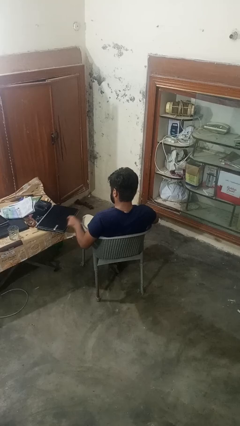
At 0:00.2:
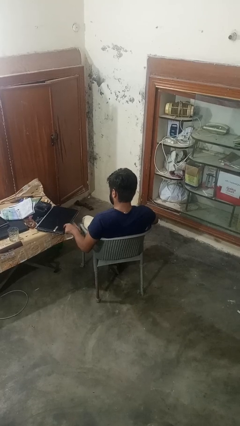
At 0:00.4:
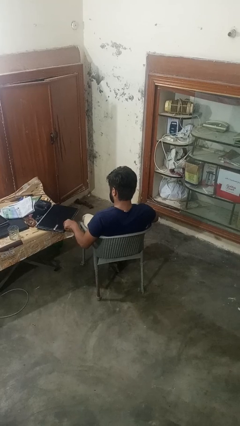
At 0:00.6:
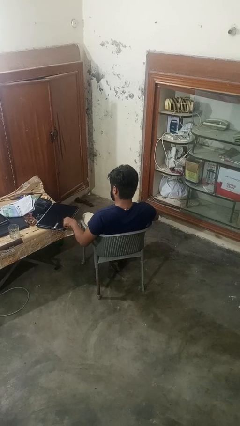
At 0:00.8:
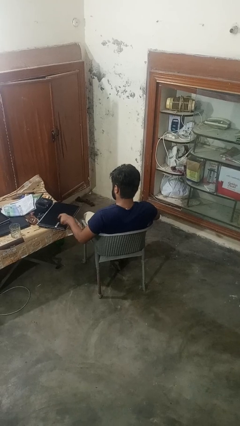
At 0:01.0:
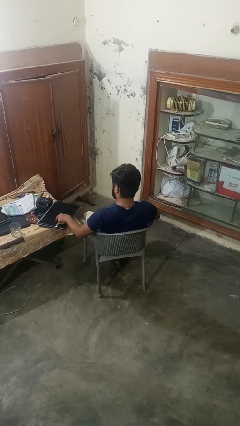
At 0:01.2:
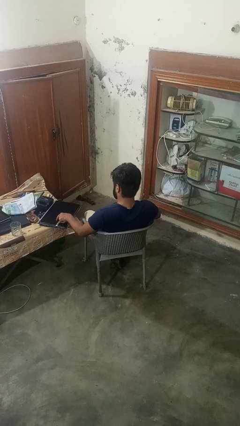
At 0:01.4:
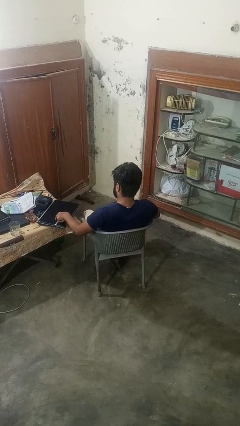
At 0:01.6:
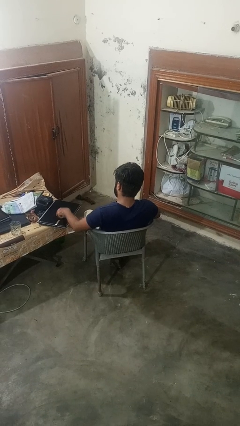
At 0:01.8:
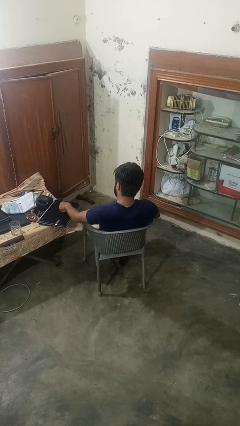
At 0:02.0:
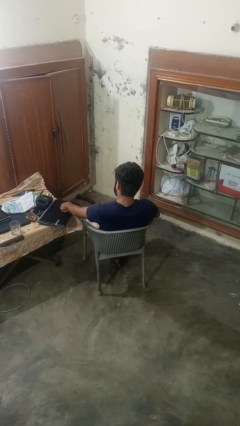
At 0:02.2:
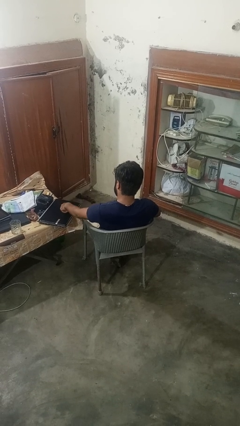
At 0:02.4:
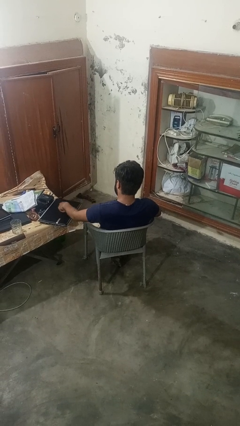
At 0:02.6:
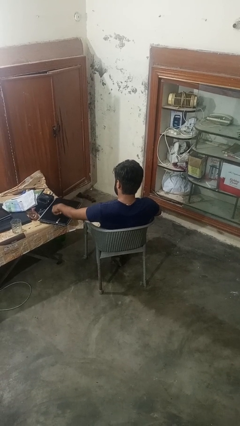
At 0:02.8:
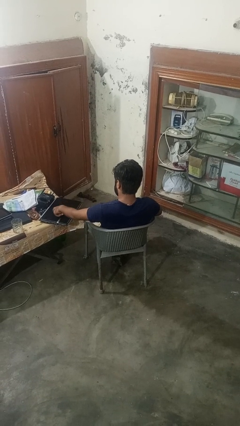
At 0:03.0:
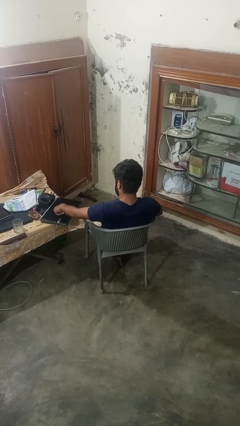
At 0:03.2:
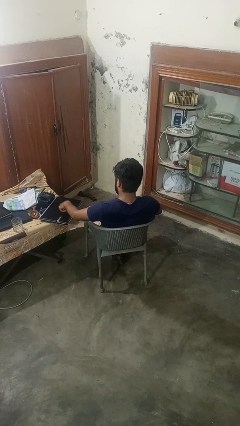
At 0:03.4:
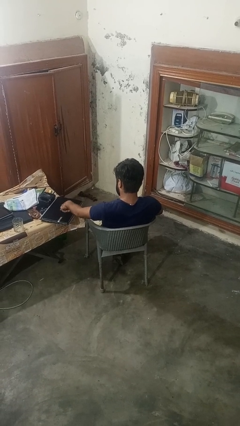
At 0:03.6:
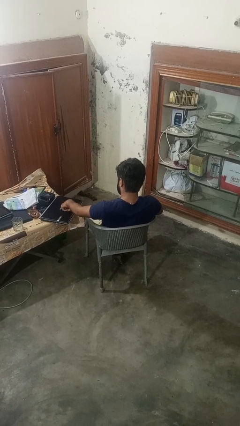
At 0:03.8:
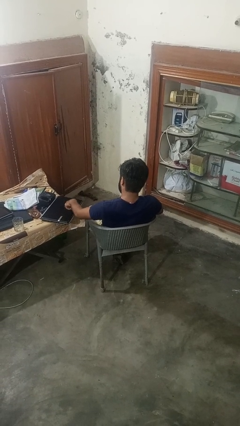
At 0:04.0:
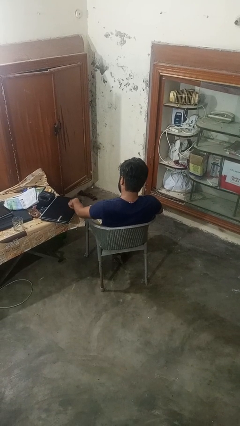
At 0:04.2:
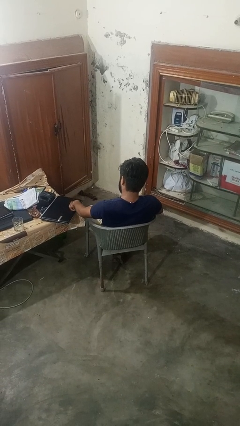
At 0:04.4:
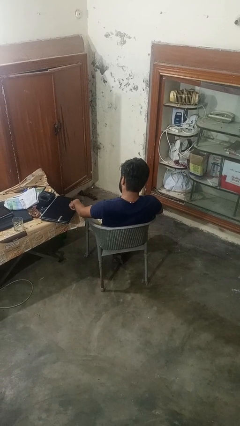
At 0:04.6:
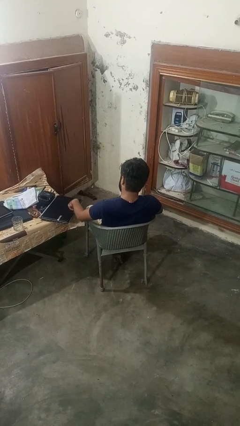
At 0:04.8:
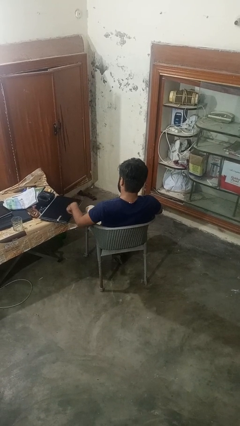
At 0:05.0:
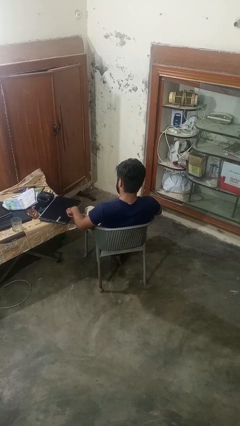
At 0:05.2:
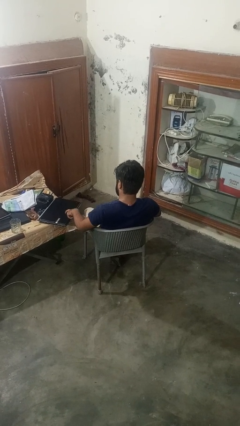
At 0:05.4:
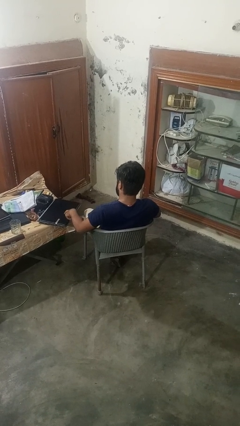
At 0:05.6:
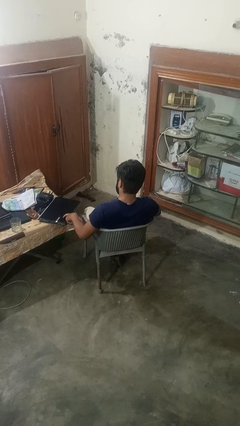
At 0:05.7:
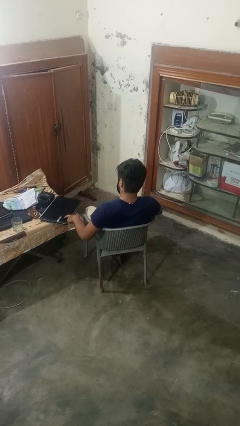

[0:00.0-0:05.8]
person taps object with finger

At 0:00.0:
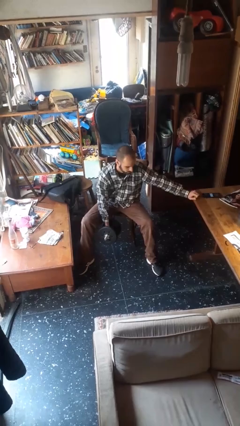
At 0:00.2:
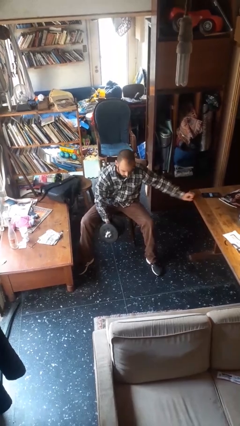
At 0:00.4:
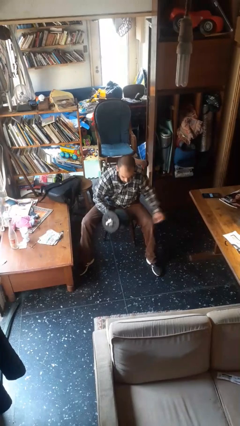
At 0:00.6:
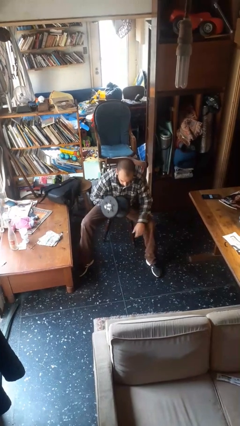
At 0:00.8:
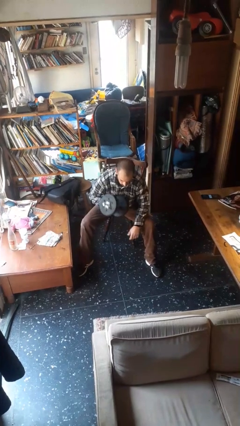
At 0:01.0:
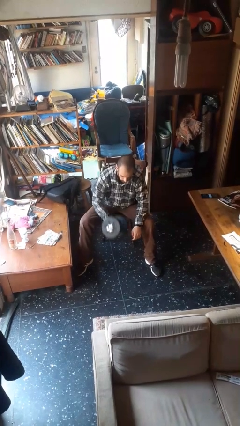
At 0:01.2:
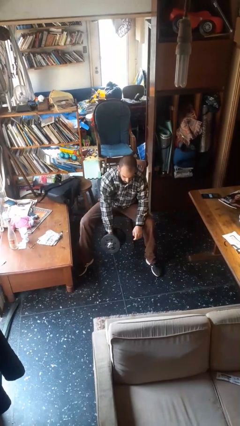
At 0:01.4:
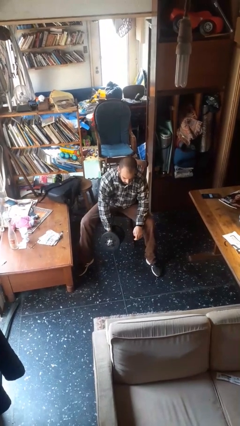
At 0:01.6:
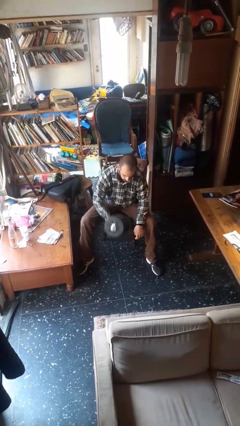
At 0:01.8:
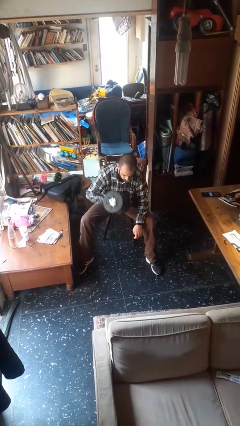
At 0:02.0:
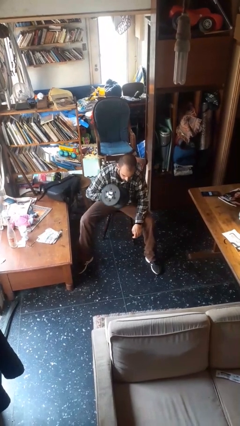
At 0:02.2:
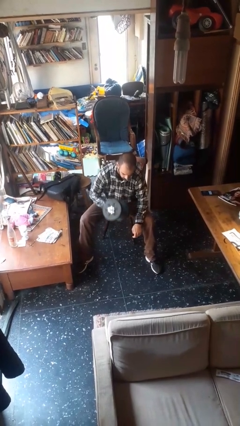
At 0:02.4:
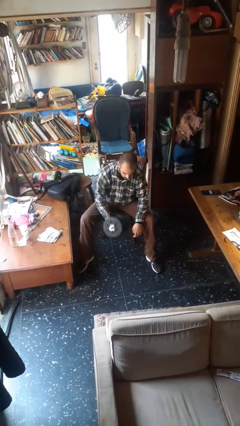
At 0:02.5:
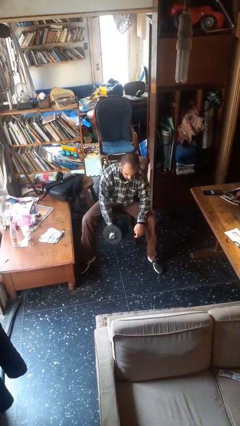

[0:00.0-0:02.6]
person lifts dumbbells

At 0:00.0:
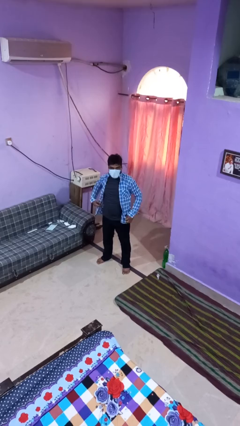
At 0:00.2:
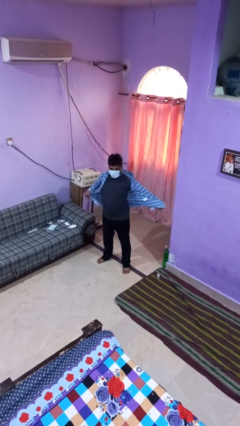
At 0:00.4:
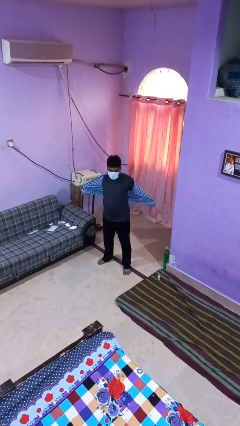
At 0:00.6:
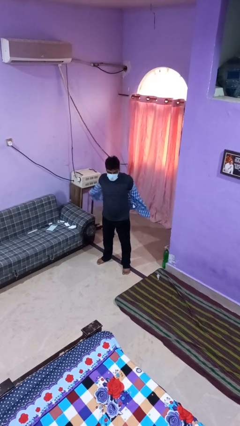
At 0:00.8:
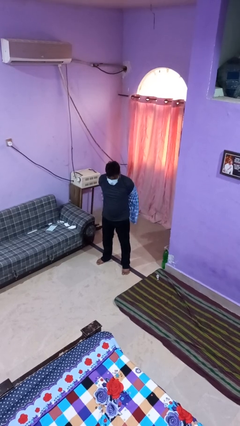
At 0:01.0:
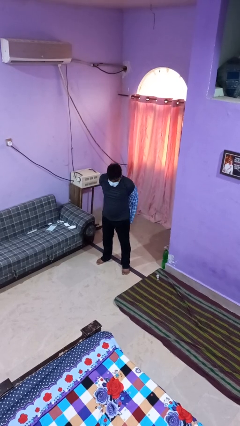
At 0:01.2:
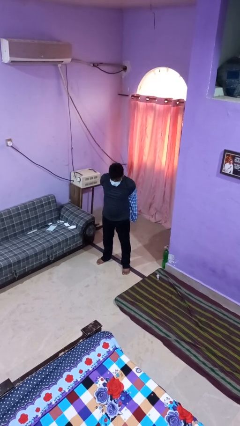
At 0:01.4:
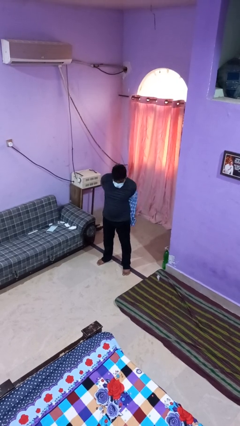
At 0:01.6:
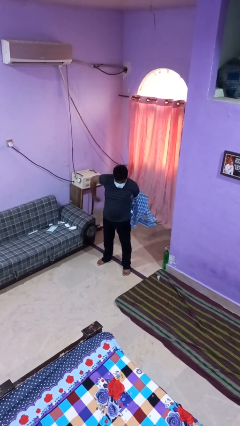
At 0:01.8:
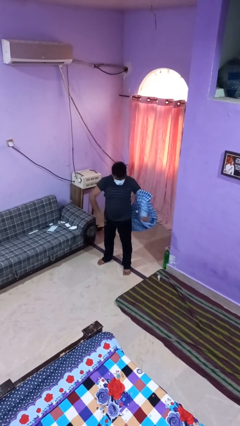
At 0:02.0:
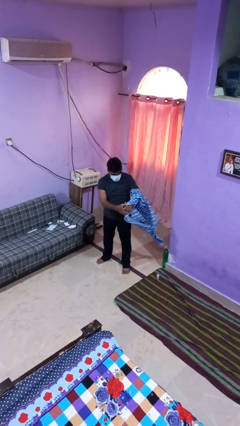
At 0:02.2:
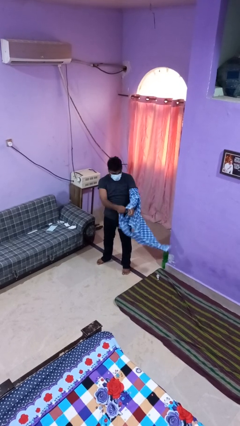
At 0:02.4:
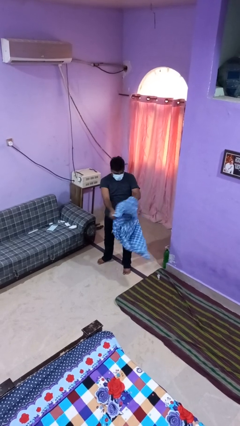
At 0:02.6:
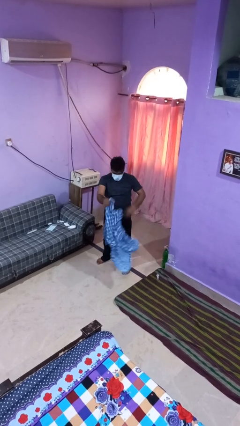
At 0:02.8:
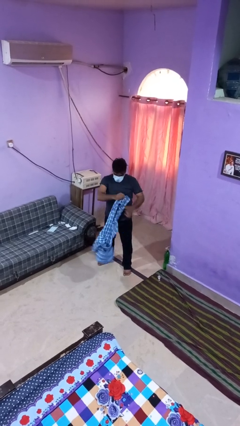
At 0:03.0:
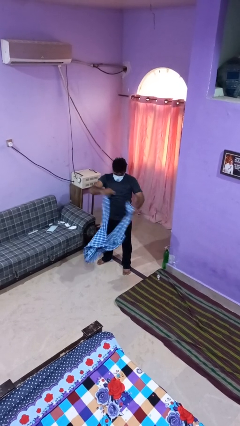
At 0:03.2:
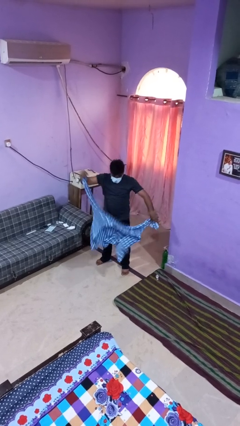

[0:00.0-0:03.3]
person takes off shirt

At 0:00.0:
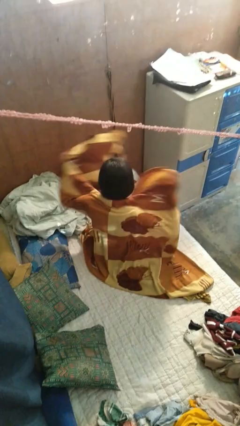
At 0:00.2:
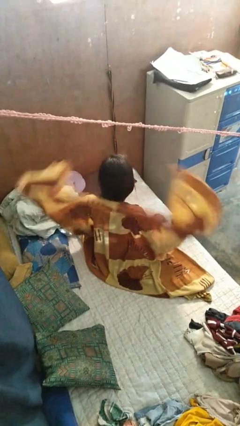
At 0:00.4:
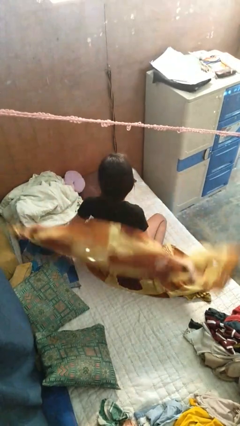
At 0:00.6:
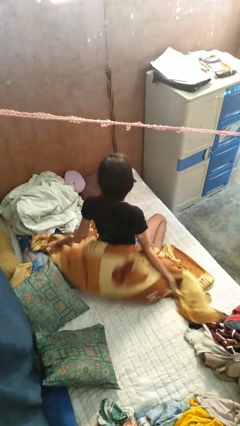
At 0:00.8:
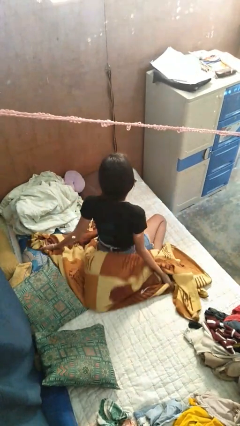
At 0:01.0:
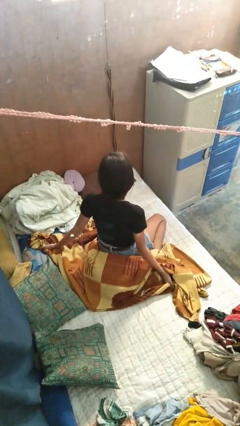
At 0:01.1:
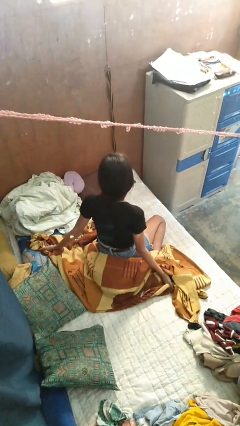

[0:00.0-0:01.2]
person uncovers with blanket

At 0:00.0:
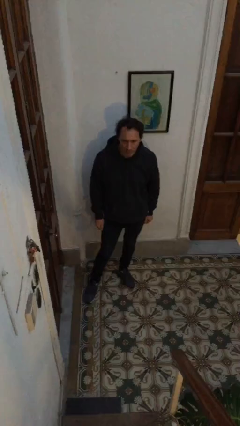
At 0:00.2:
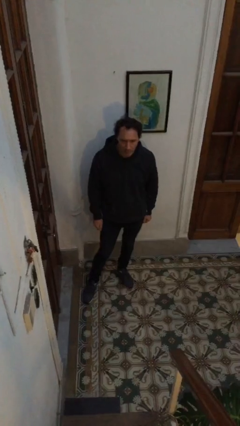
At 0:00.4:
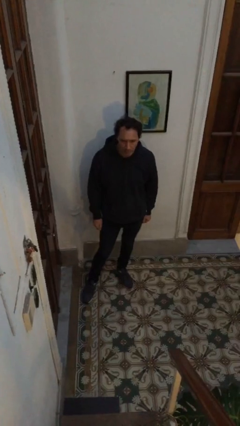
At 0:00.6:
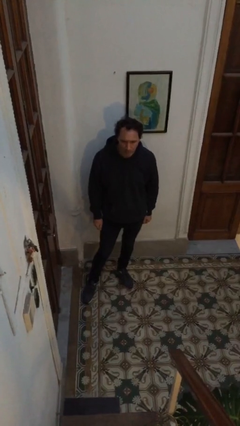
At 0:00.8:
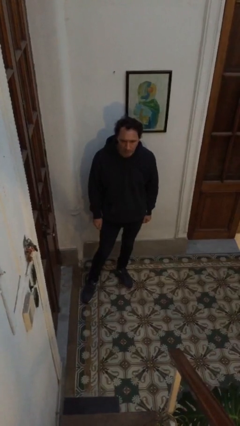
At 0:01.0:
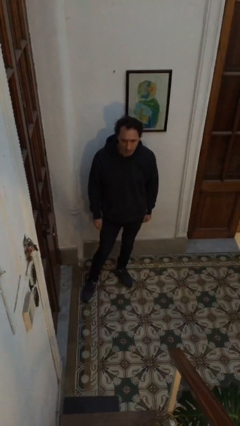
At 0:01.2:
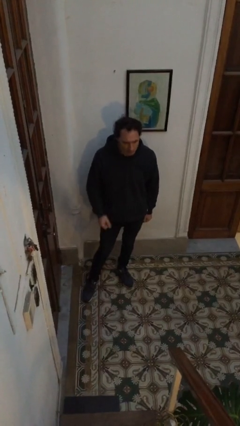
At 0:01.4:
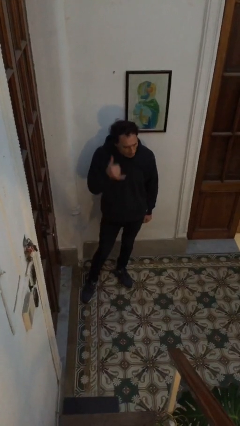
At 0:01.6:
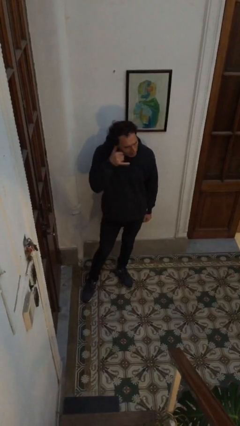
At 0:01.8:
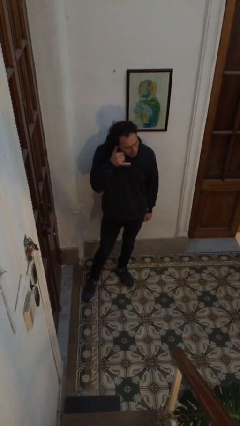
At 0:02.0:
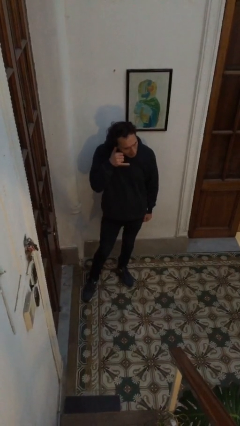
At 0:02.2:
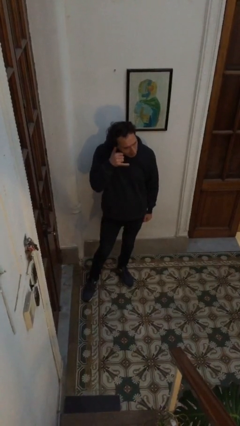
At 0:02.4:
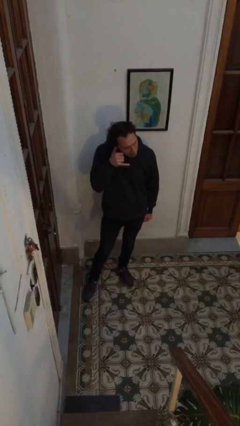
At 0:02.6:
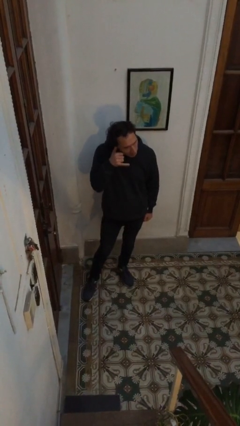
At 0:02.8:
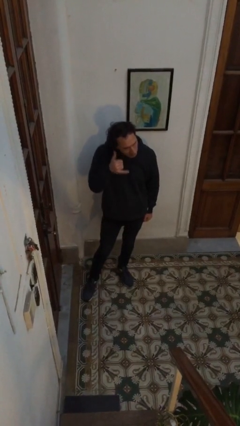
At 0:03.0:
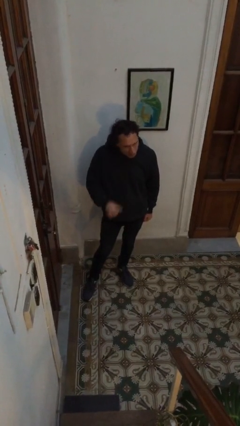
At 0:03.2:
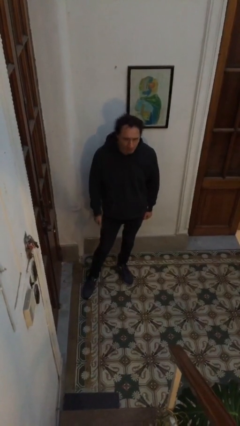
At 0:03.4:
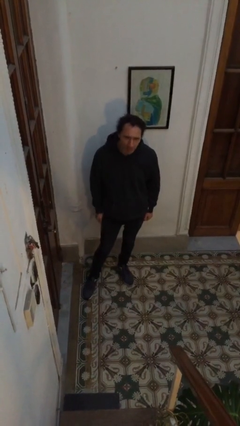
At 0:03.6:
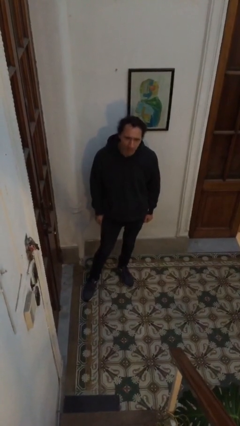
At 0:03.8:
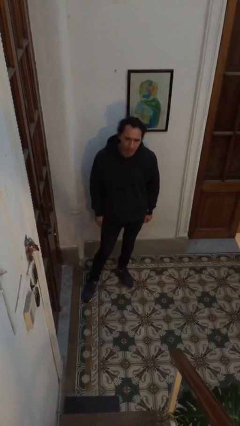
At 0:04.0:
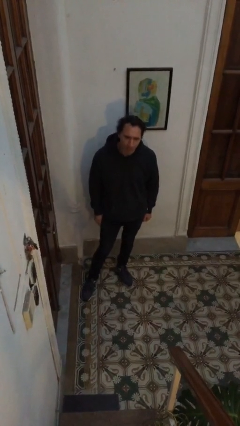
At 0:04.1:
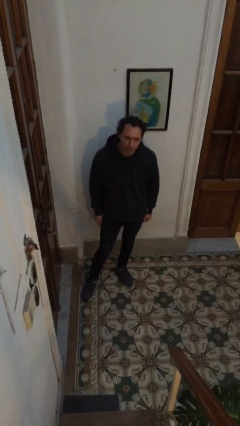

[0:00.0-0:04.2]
person gestures call me

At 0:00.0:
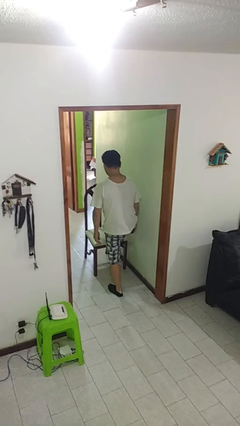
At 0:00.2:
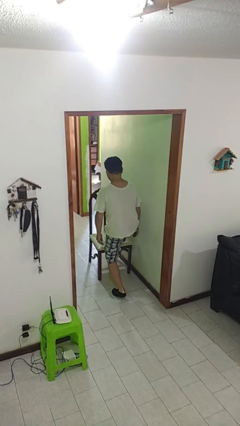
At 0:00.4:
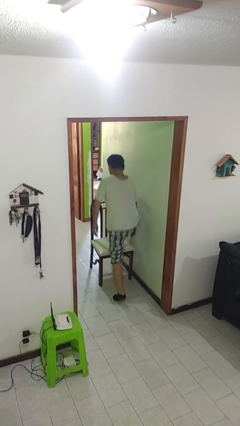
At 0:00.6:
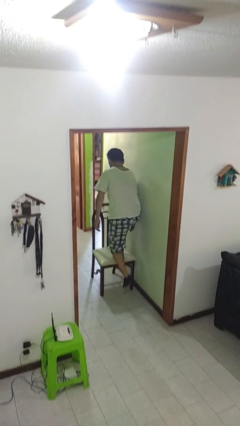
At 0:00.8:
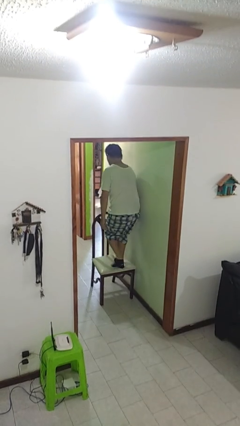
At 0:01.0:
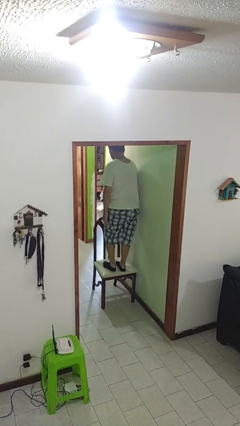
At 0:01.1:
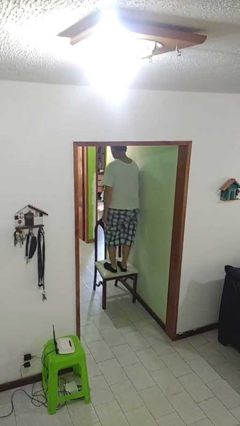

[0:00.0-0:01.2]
person climbs on chair
